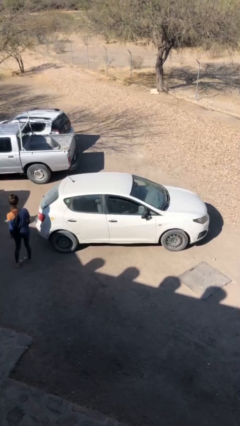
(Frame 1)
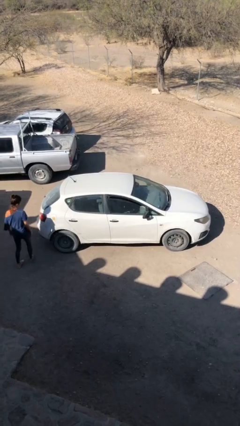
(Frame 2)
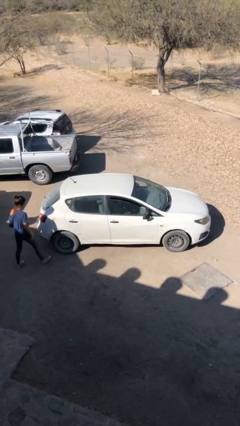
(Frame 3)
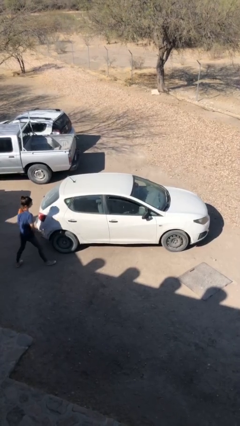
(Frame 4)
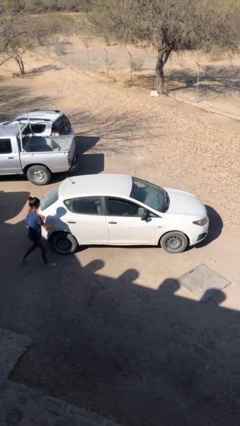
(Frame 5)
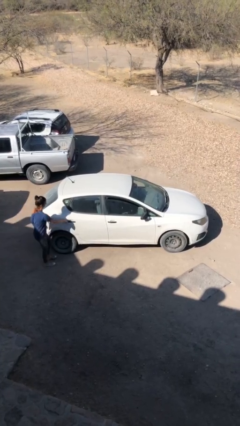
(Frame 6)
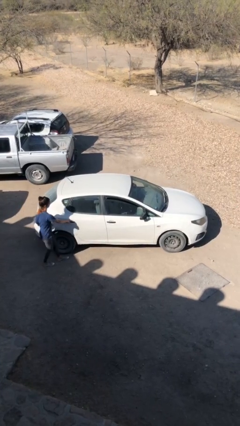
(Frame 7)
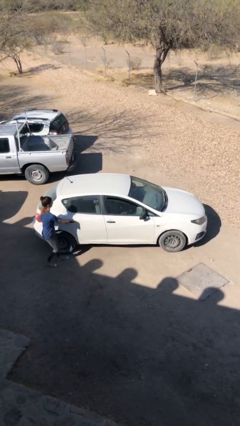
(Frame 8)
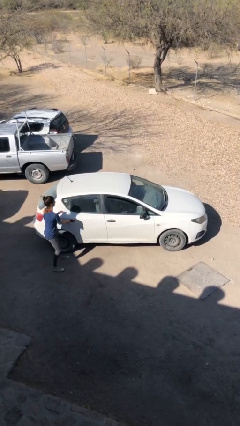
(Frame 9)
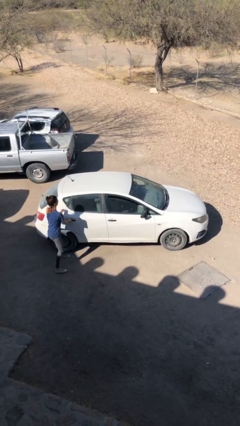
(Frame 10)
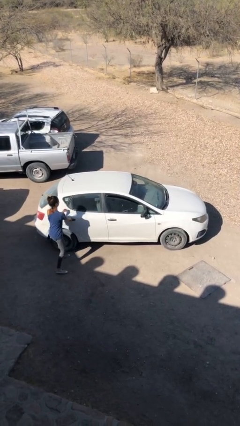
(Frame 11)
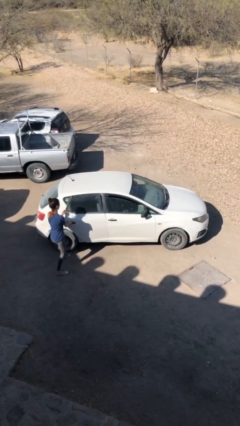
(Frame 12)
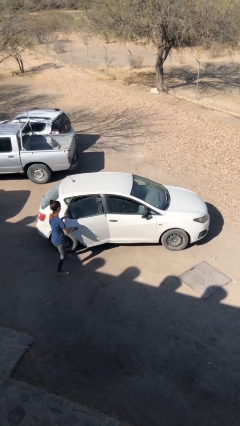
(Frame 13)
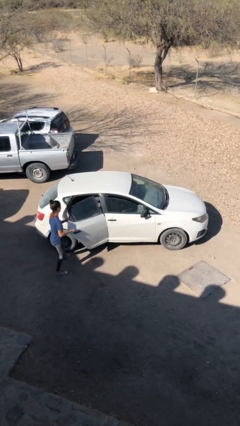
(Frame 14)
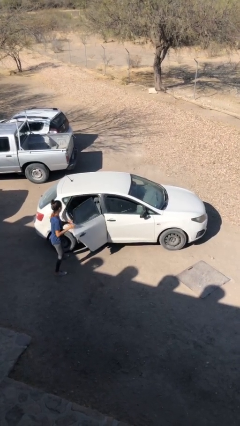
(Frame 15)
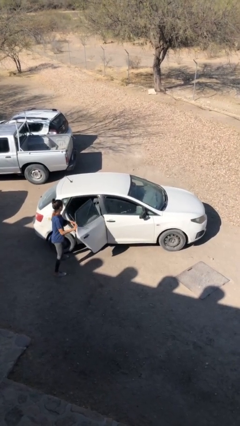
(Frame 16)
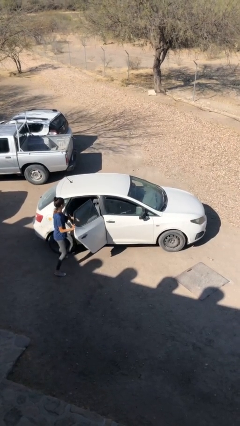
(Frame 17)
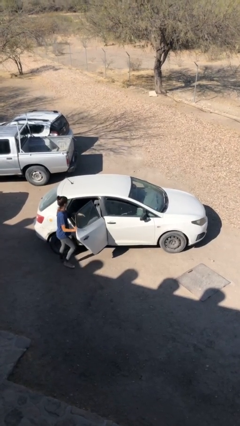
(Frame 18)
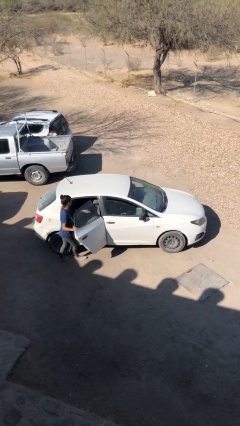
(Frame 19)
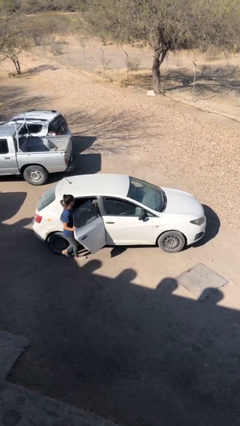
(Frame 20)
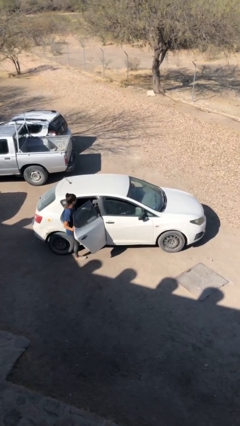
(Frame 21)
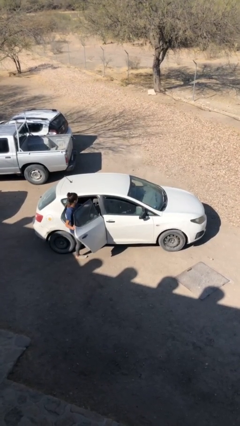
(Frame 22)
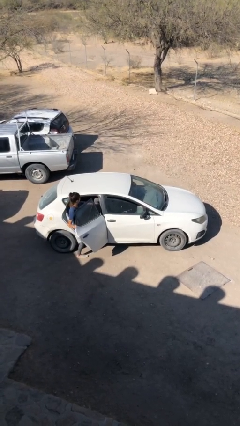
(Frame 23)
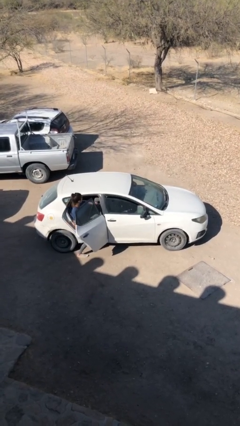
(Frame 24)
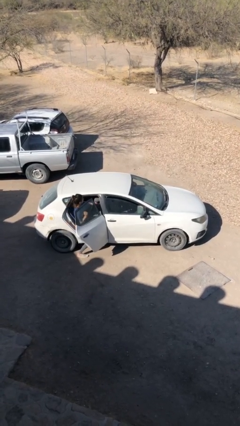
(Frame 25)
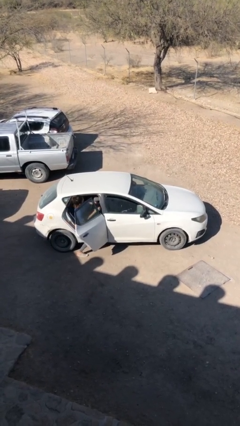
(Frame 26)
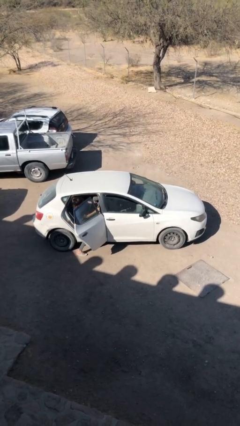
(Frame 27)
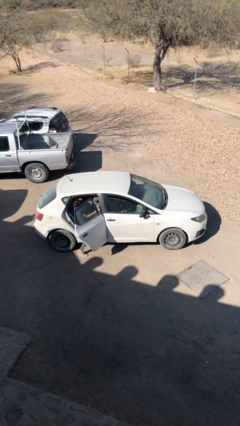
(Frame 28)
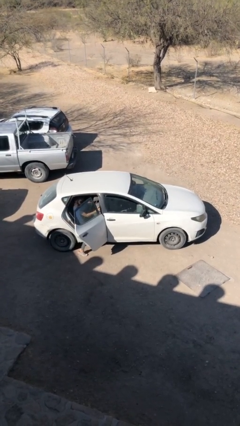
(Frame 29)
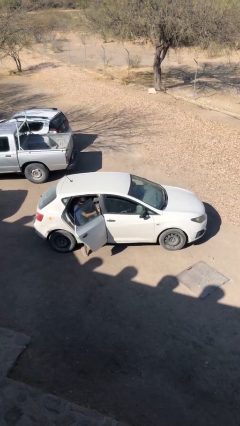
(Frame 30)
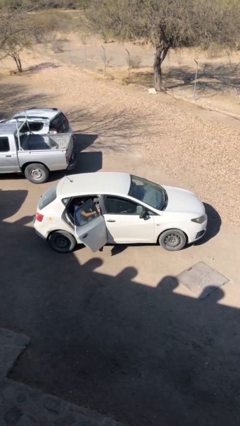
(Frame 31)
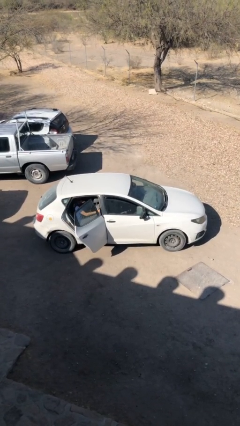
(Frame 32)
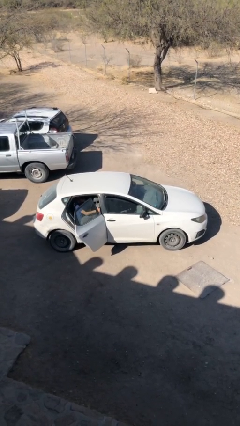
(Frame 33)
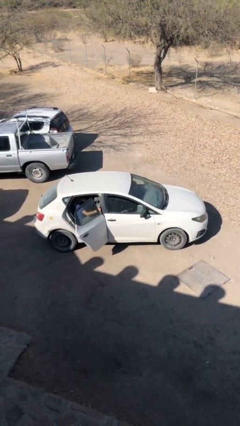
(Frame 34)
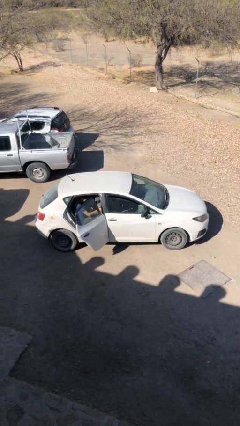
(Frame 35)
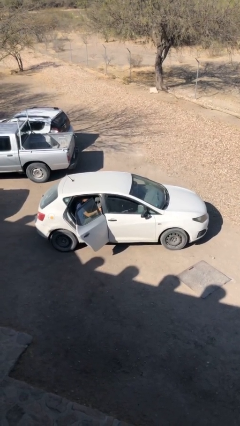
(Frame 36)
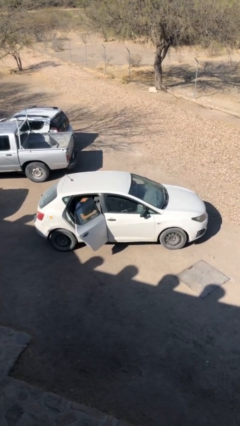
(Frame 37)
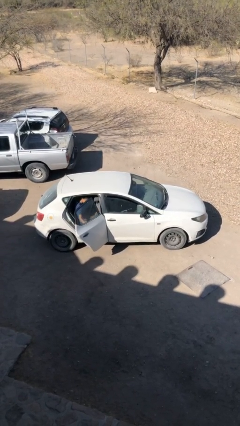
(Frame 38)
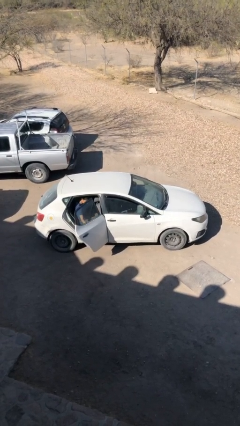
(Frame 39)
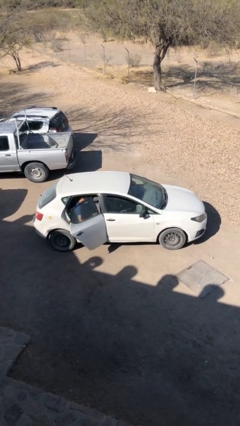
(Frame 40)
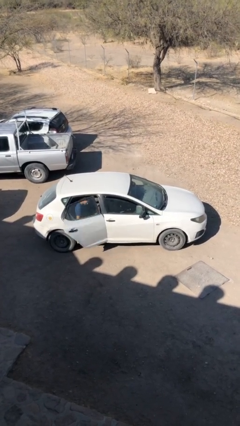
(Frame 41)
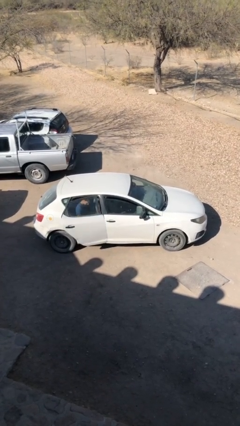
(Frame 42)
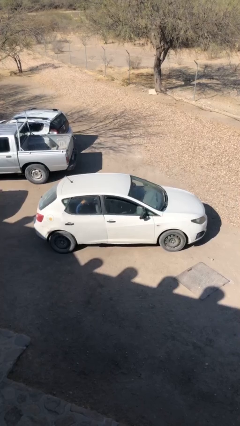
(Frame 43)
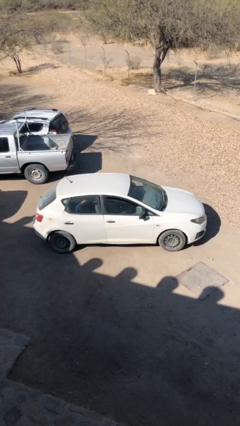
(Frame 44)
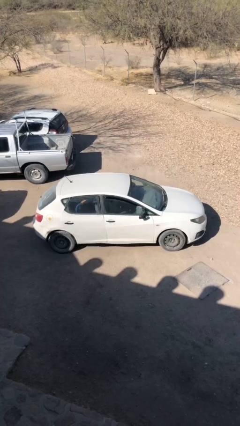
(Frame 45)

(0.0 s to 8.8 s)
car picks up person

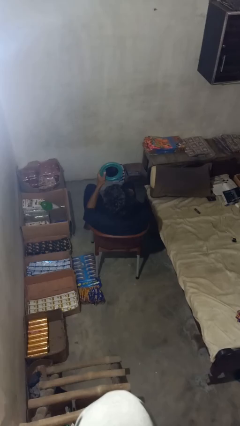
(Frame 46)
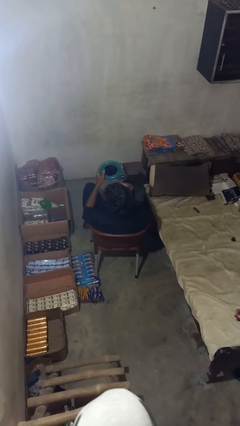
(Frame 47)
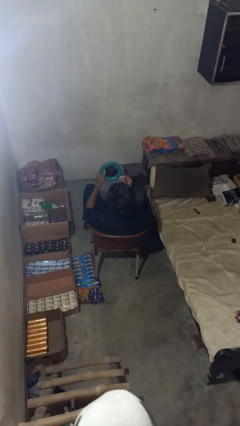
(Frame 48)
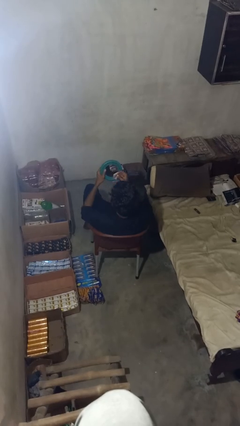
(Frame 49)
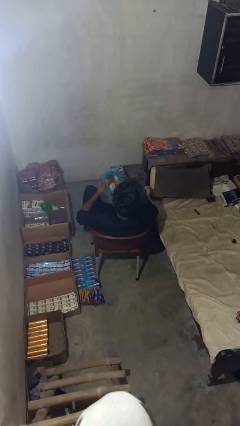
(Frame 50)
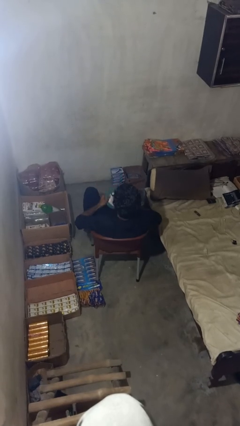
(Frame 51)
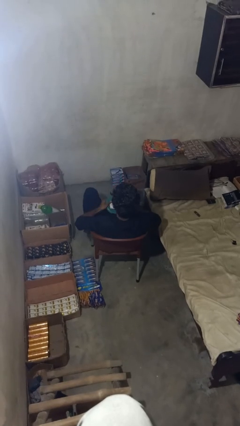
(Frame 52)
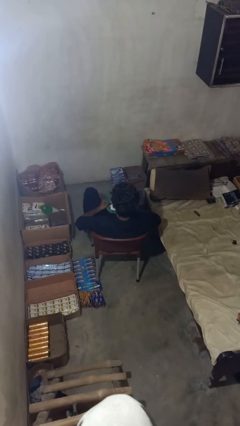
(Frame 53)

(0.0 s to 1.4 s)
person applies foundation makeup

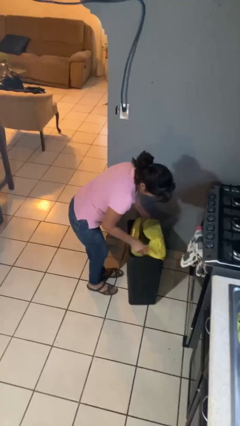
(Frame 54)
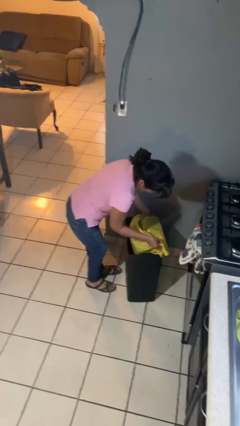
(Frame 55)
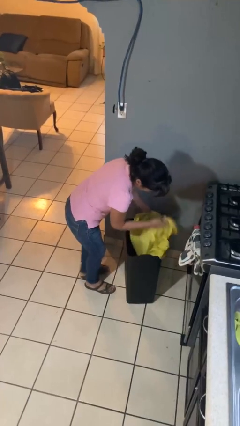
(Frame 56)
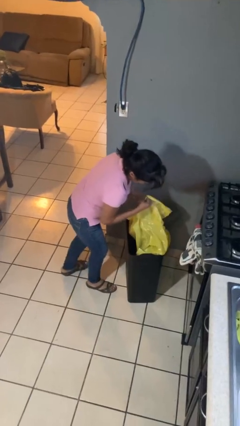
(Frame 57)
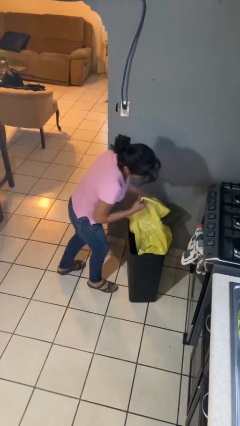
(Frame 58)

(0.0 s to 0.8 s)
person removes trashbag from trashcan

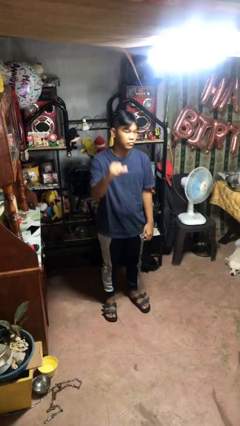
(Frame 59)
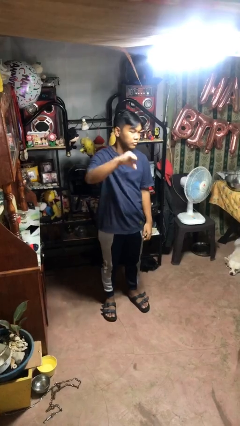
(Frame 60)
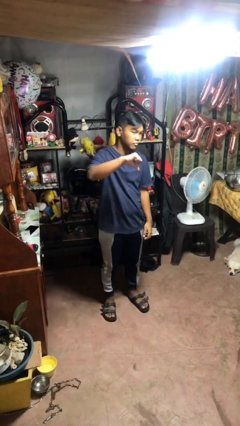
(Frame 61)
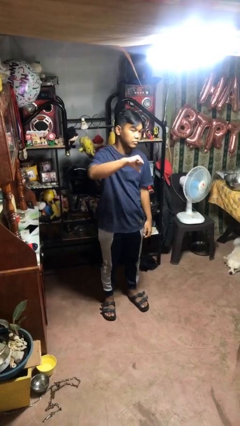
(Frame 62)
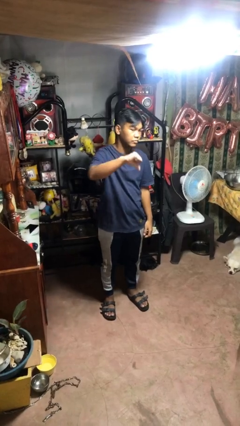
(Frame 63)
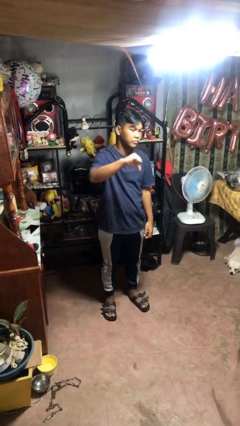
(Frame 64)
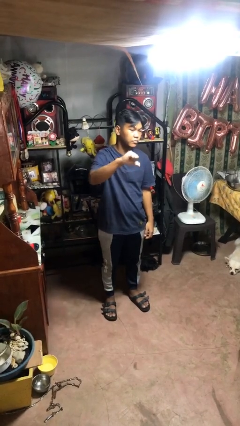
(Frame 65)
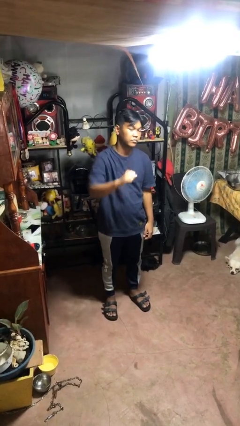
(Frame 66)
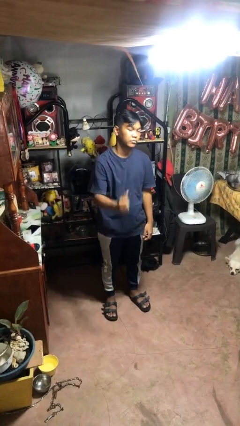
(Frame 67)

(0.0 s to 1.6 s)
person gestures thumbs down

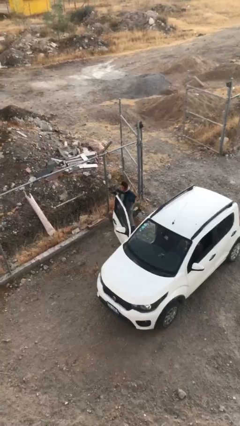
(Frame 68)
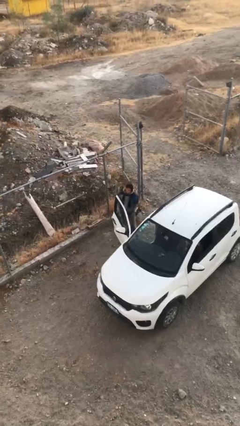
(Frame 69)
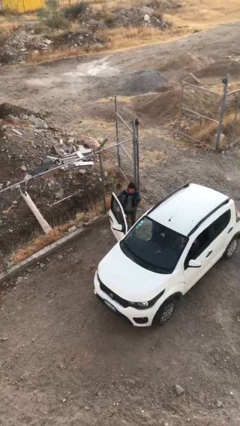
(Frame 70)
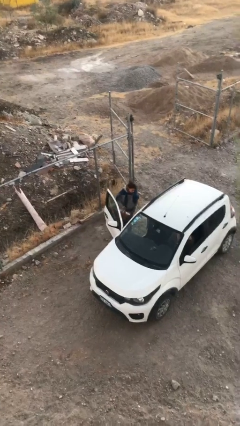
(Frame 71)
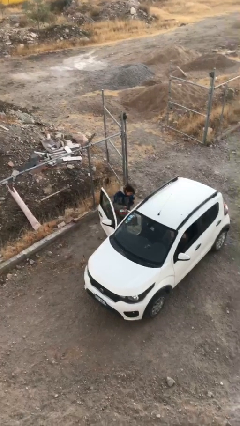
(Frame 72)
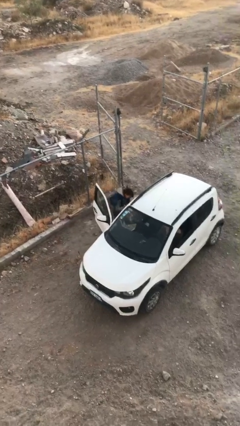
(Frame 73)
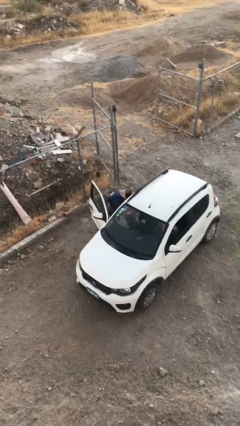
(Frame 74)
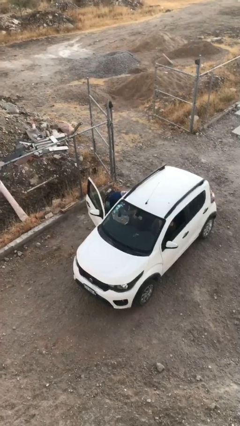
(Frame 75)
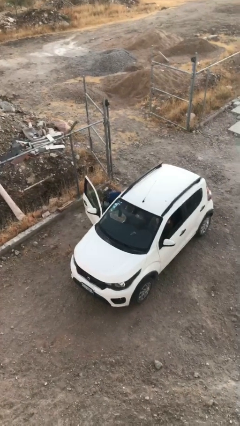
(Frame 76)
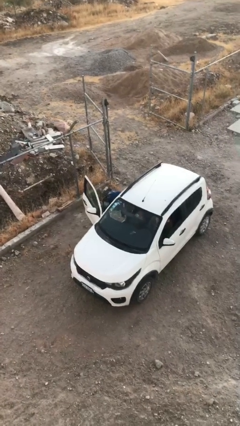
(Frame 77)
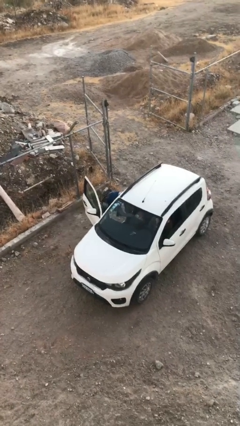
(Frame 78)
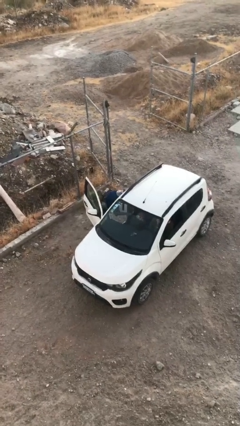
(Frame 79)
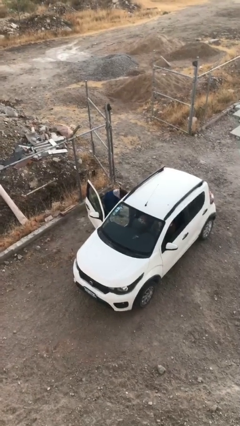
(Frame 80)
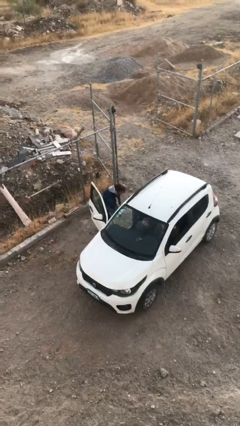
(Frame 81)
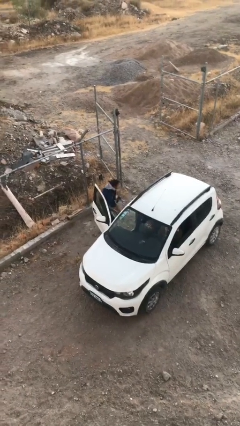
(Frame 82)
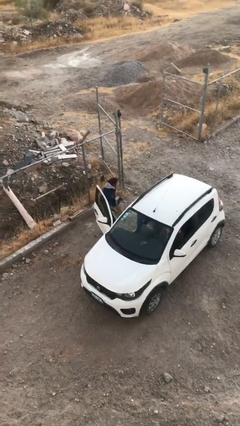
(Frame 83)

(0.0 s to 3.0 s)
person loads car

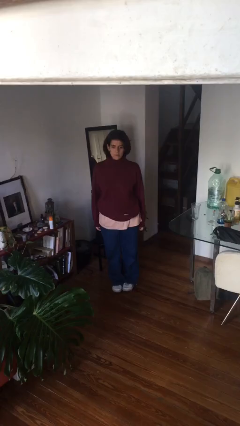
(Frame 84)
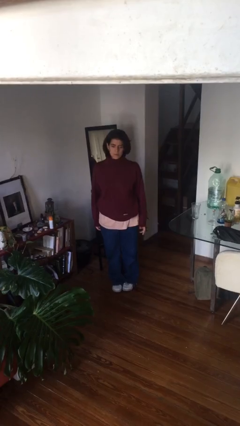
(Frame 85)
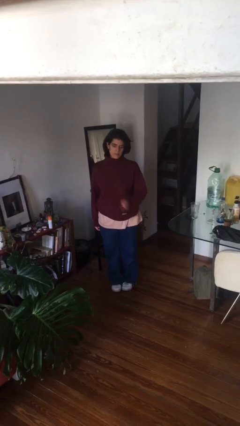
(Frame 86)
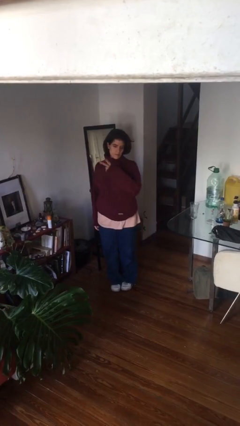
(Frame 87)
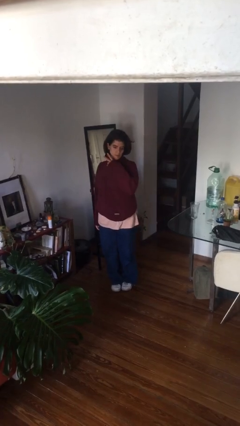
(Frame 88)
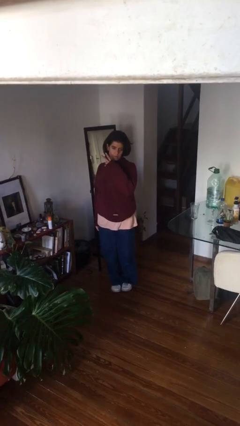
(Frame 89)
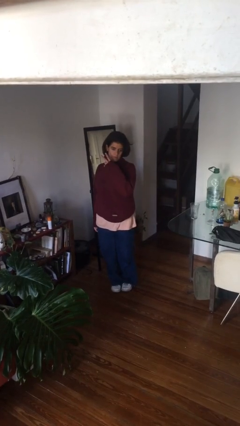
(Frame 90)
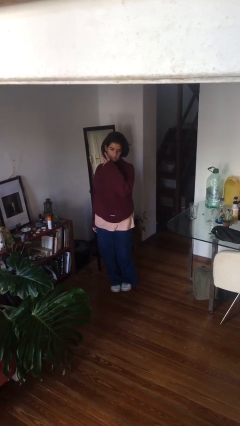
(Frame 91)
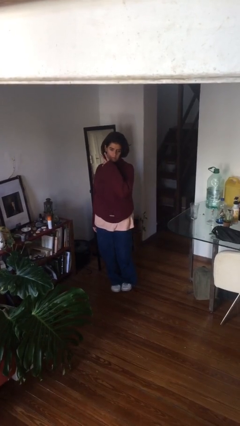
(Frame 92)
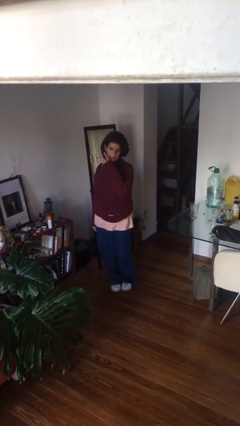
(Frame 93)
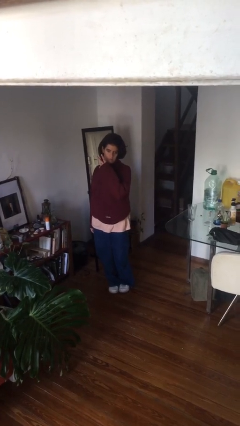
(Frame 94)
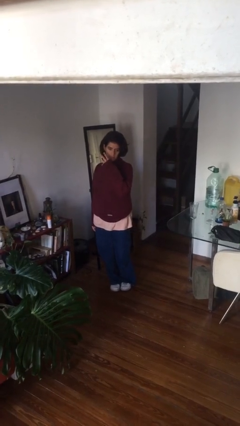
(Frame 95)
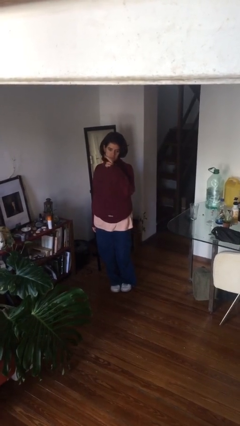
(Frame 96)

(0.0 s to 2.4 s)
person gestures peace
